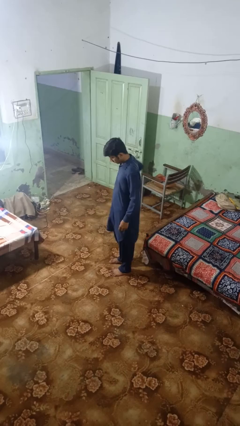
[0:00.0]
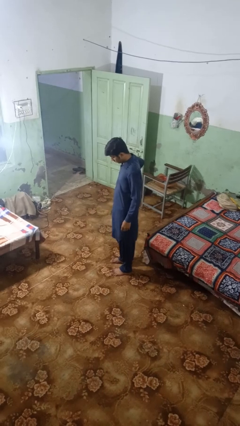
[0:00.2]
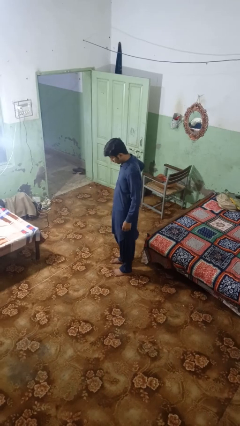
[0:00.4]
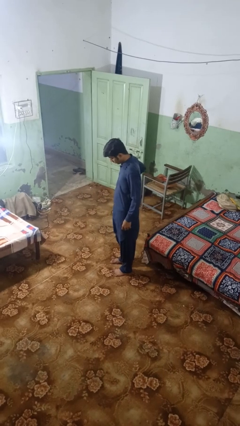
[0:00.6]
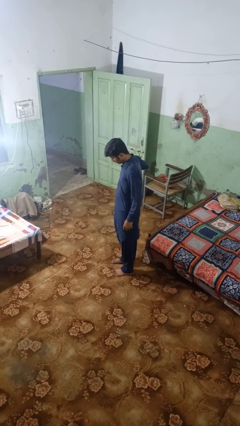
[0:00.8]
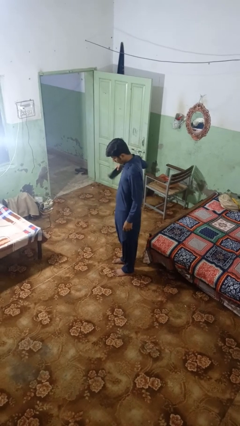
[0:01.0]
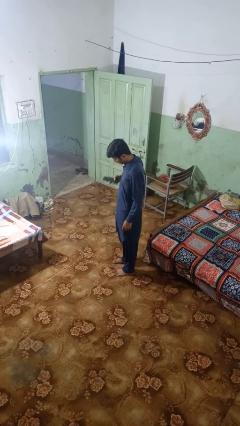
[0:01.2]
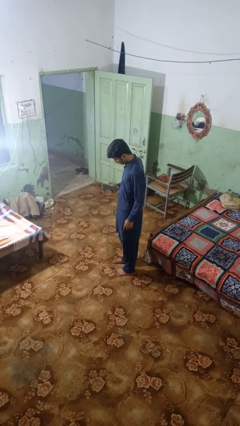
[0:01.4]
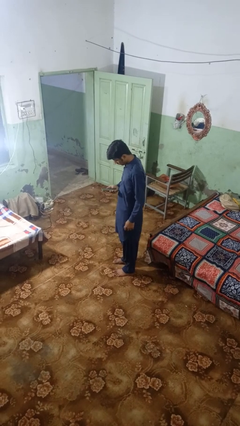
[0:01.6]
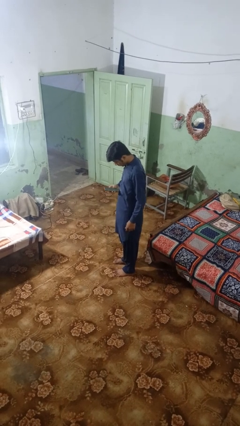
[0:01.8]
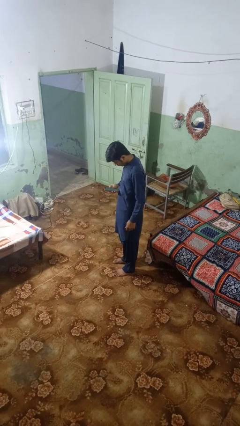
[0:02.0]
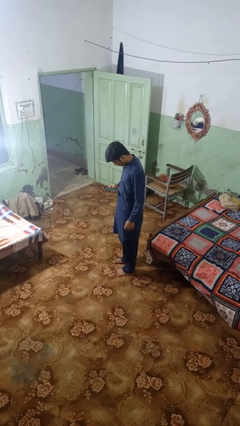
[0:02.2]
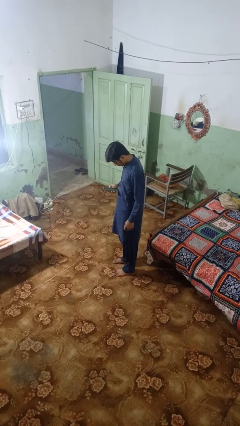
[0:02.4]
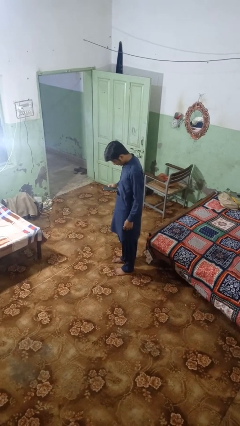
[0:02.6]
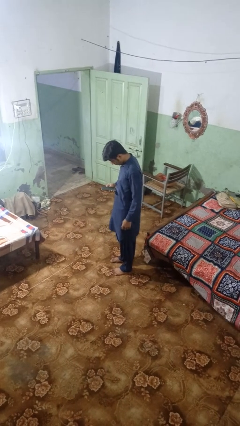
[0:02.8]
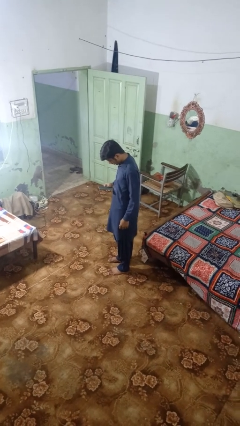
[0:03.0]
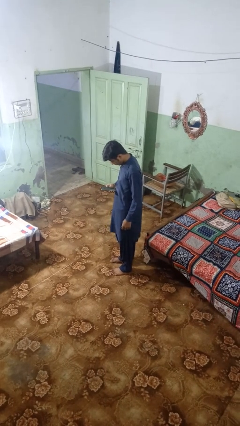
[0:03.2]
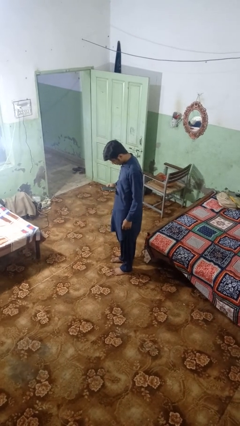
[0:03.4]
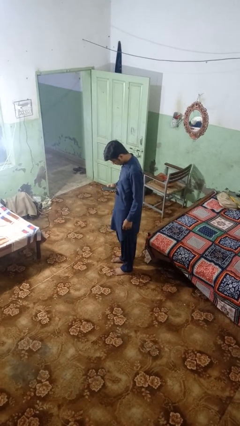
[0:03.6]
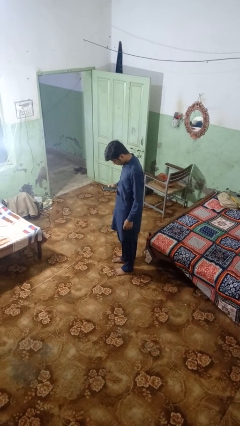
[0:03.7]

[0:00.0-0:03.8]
person takes phone from pocket

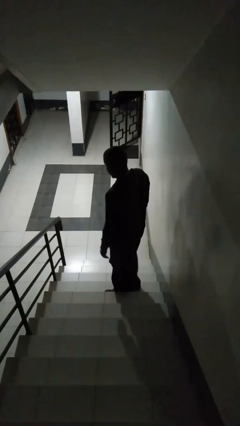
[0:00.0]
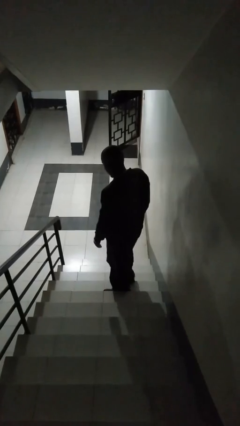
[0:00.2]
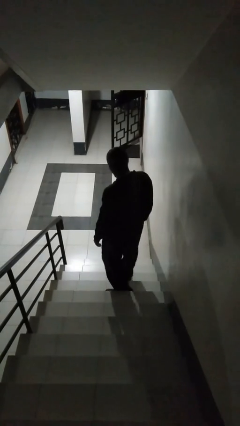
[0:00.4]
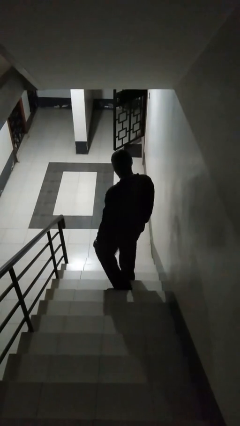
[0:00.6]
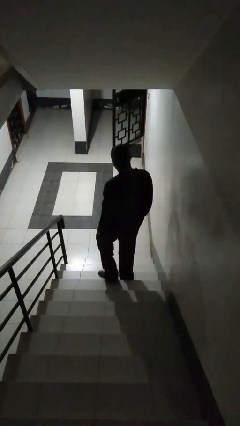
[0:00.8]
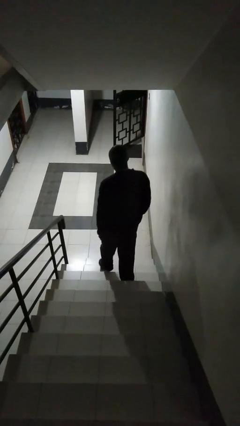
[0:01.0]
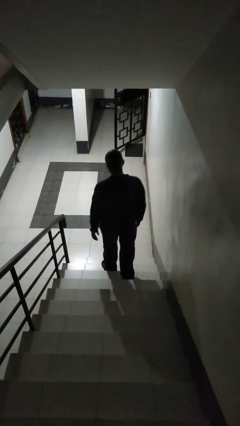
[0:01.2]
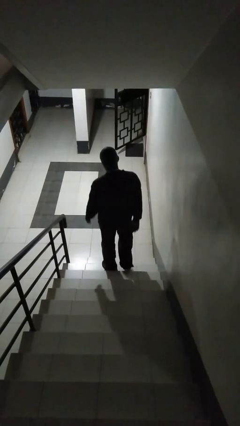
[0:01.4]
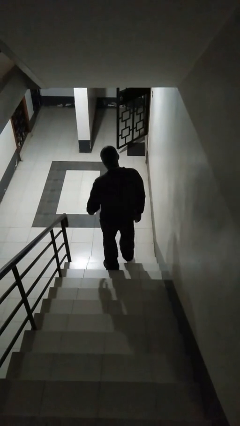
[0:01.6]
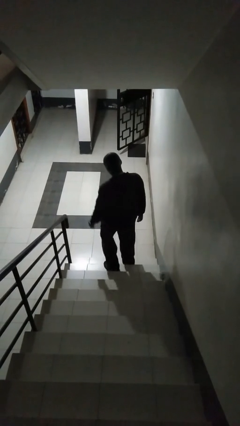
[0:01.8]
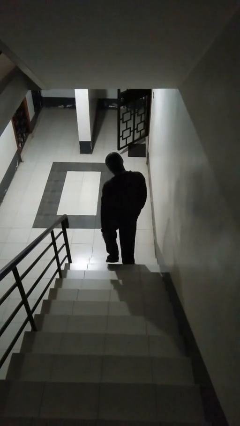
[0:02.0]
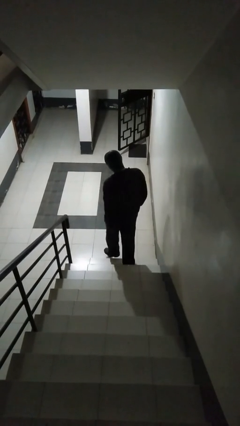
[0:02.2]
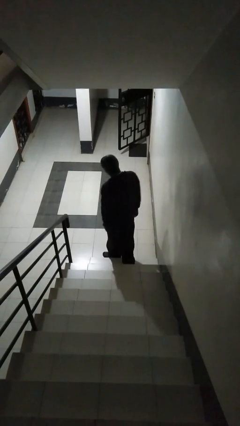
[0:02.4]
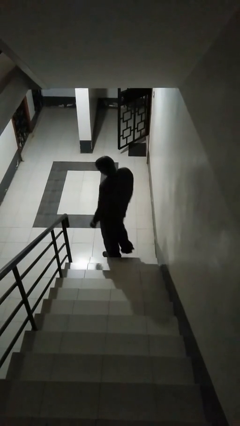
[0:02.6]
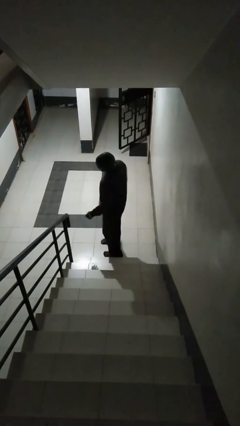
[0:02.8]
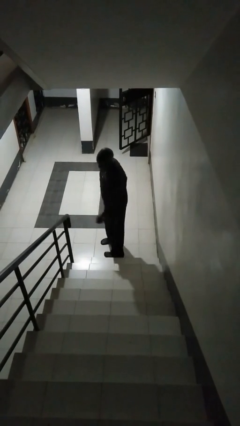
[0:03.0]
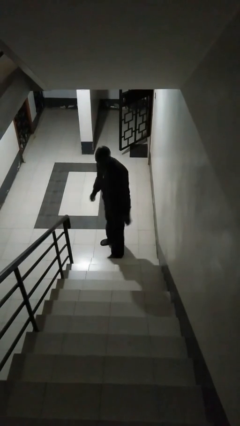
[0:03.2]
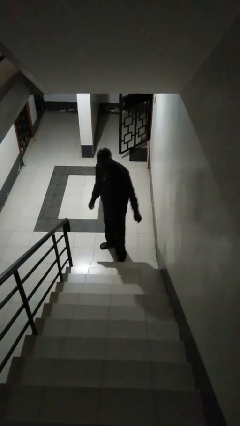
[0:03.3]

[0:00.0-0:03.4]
person climbs down stairs

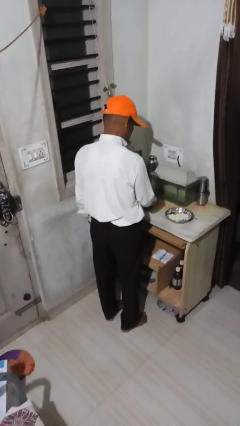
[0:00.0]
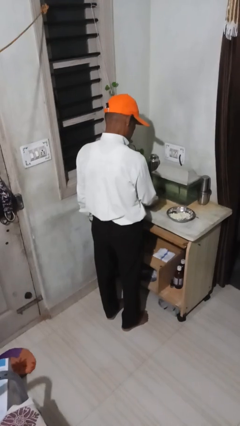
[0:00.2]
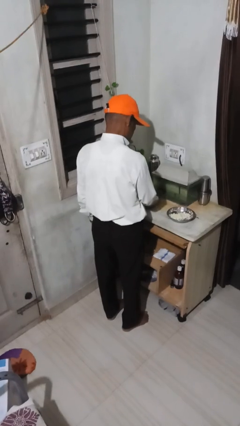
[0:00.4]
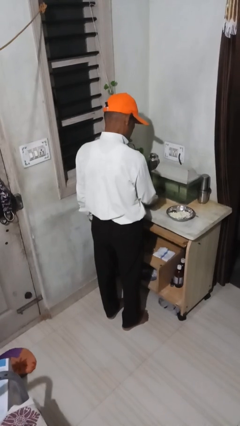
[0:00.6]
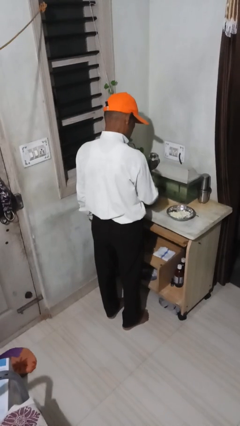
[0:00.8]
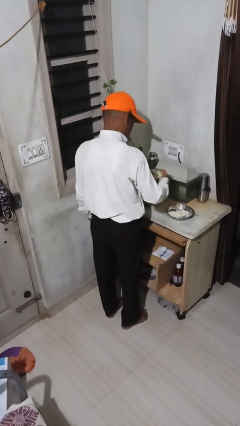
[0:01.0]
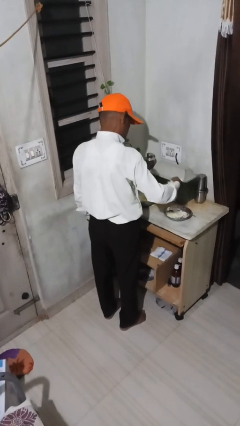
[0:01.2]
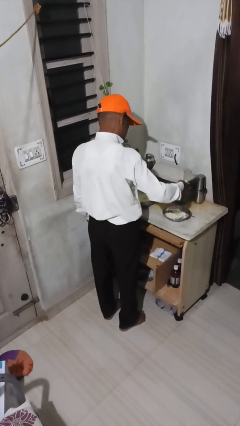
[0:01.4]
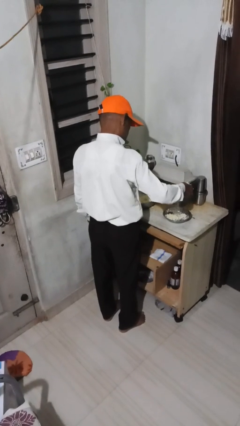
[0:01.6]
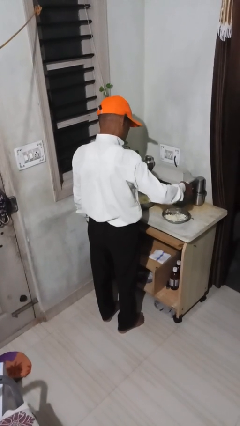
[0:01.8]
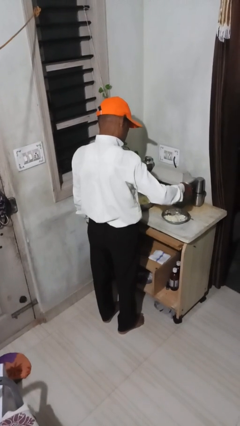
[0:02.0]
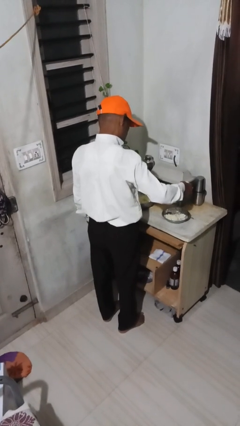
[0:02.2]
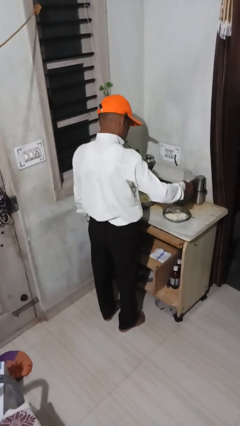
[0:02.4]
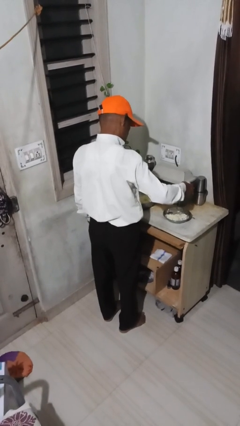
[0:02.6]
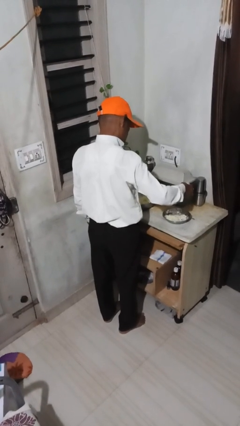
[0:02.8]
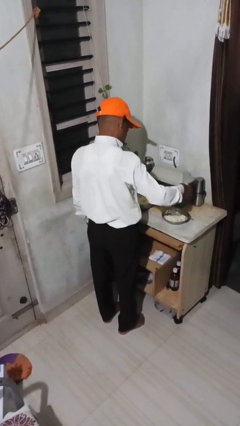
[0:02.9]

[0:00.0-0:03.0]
person pours into bowl

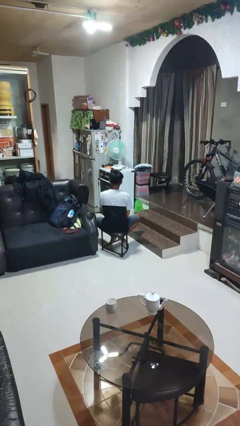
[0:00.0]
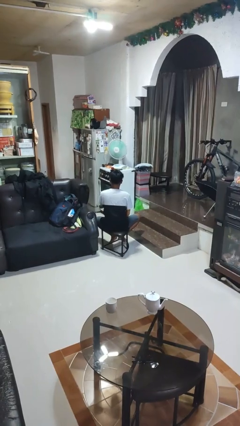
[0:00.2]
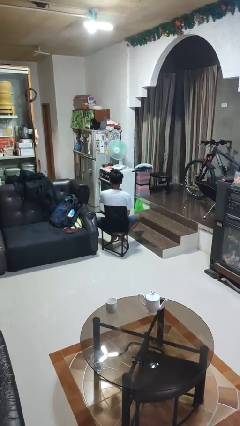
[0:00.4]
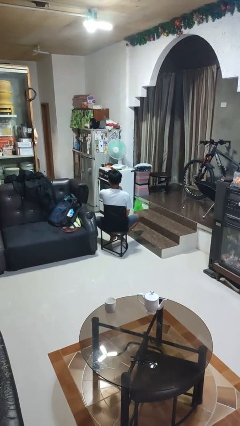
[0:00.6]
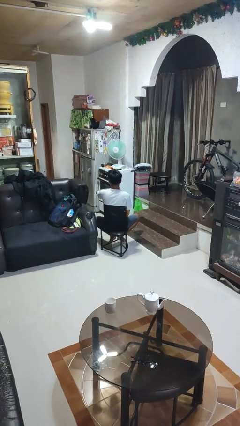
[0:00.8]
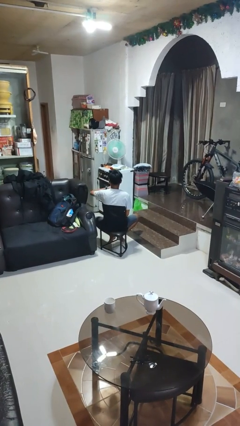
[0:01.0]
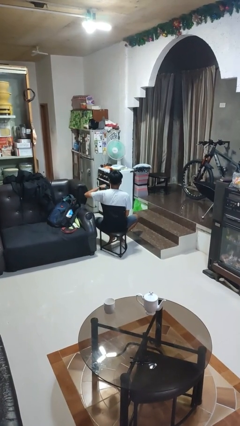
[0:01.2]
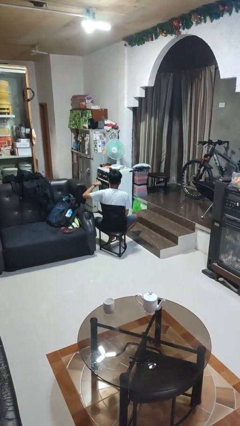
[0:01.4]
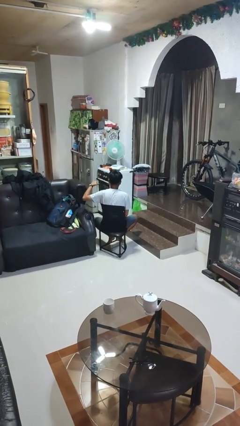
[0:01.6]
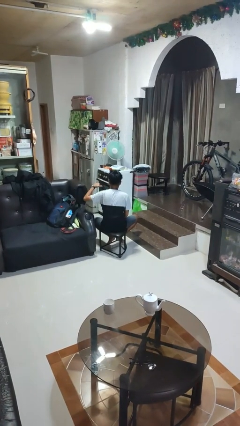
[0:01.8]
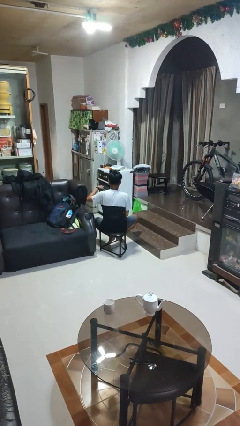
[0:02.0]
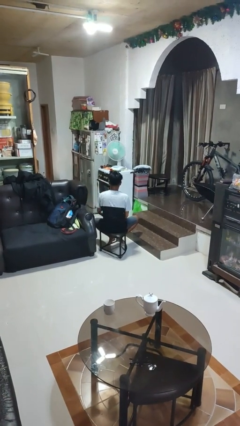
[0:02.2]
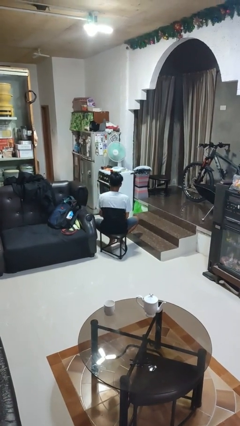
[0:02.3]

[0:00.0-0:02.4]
person gestures cut

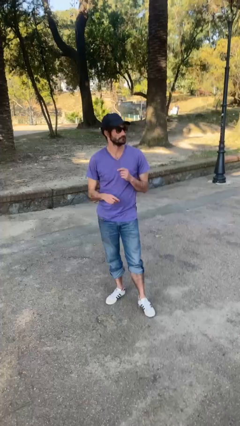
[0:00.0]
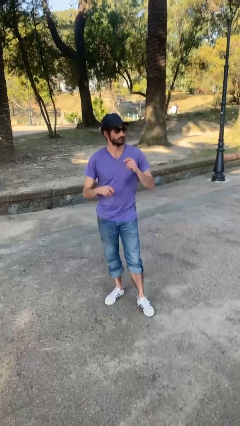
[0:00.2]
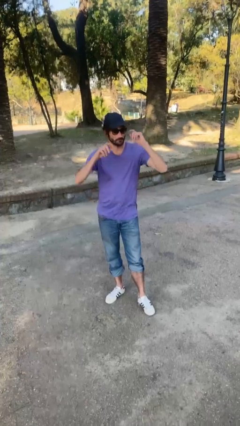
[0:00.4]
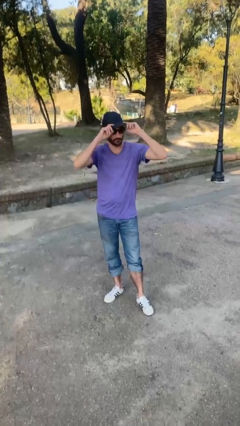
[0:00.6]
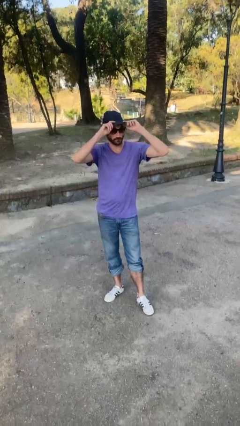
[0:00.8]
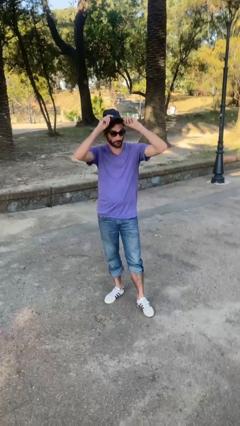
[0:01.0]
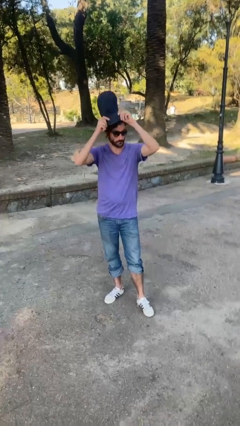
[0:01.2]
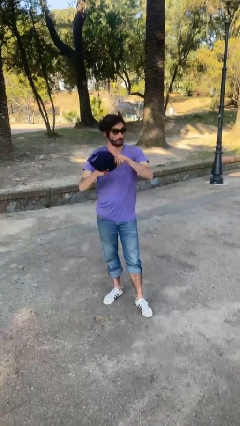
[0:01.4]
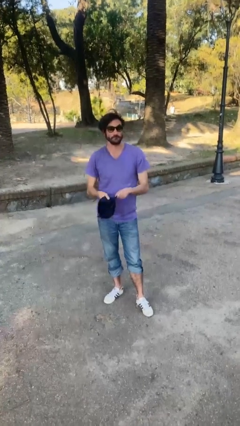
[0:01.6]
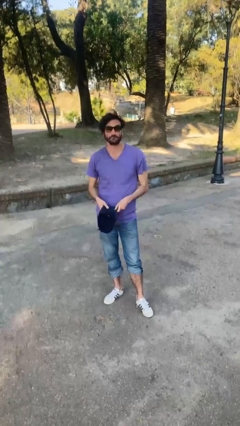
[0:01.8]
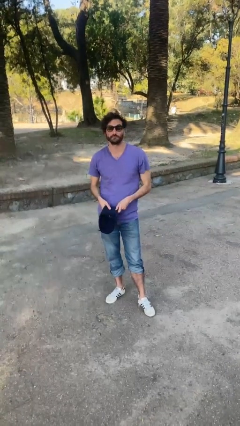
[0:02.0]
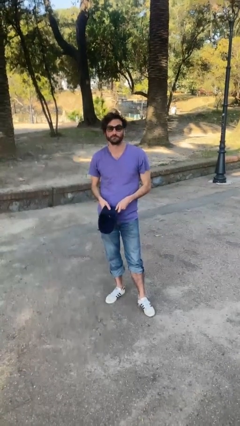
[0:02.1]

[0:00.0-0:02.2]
person takes off hat

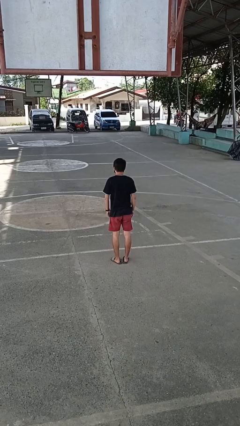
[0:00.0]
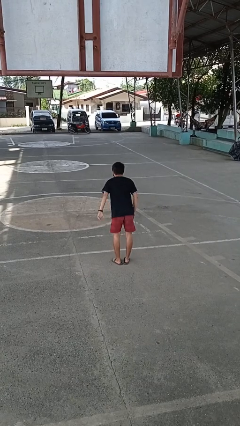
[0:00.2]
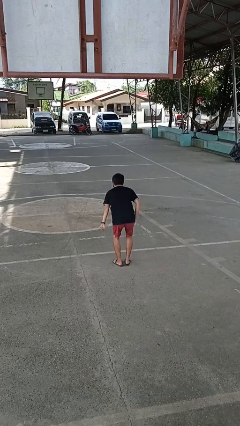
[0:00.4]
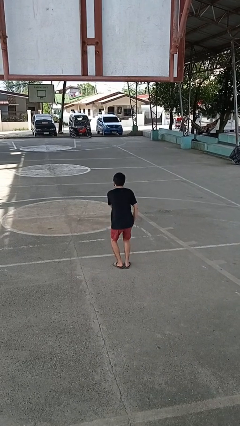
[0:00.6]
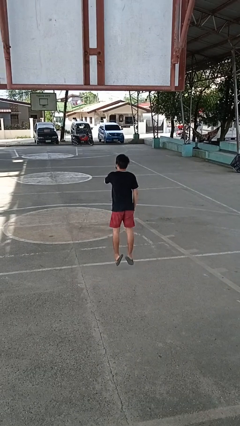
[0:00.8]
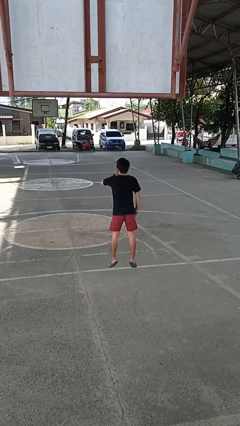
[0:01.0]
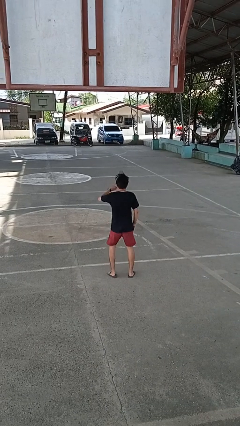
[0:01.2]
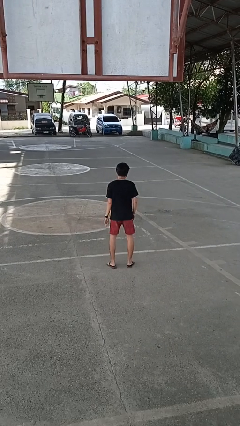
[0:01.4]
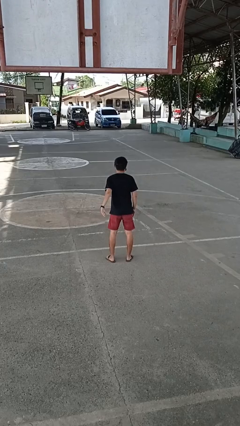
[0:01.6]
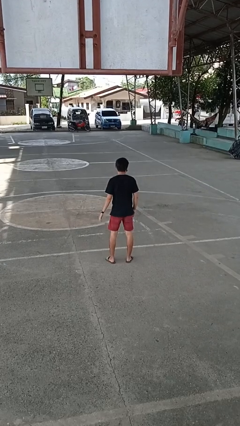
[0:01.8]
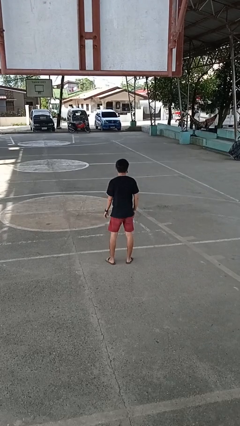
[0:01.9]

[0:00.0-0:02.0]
person jumps

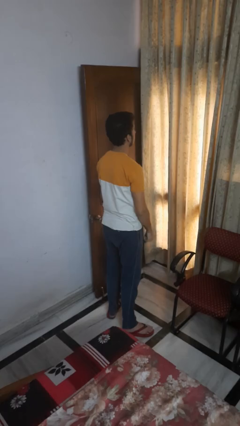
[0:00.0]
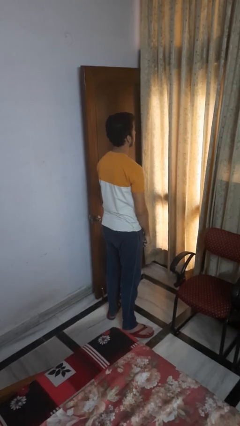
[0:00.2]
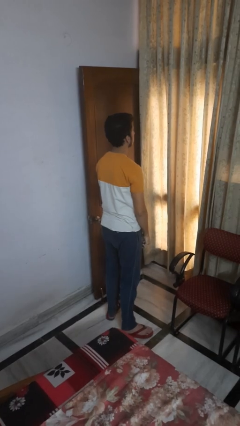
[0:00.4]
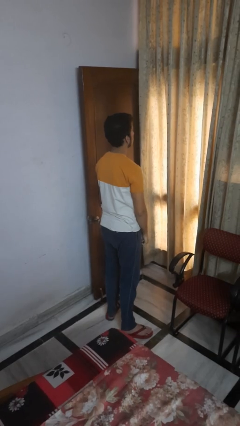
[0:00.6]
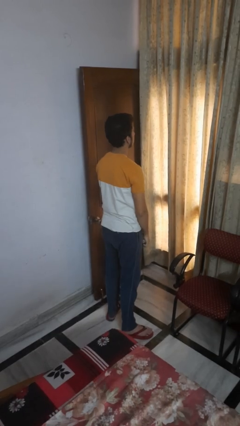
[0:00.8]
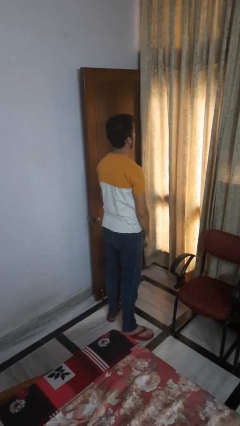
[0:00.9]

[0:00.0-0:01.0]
person takes off facemask
